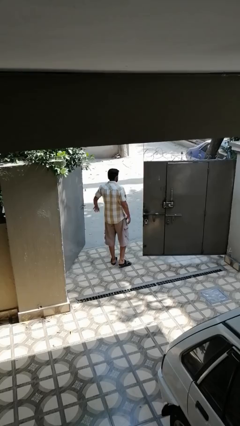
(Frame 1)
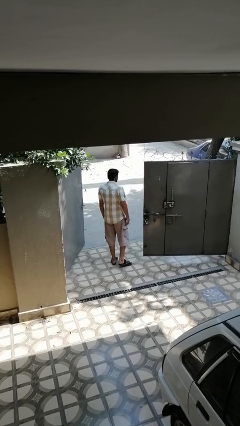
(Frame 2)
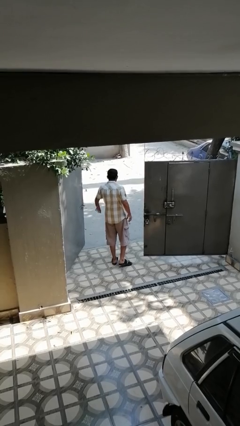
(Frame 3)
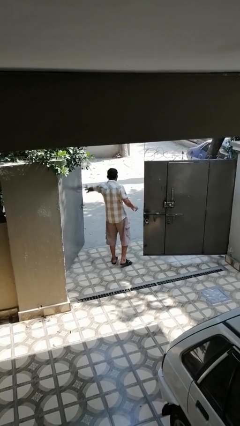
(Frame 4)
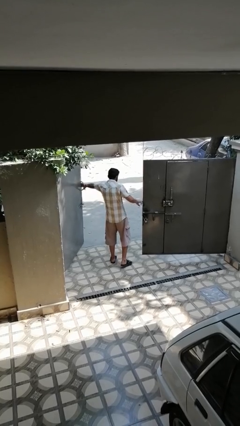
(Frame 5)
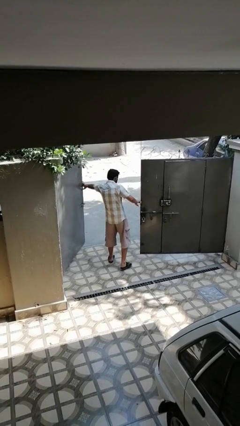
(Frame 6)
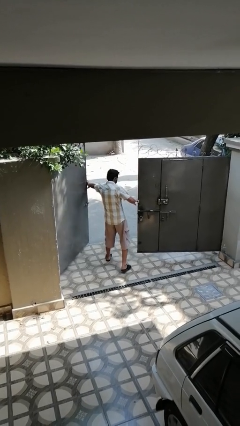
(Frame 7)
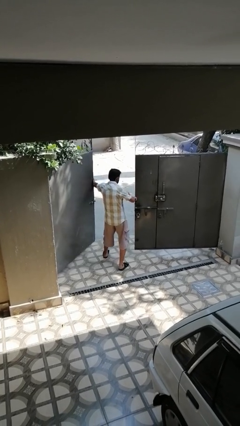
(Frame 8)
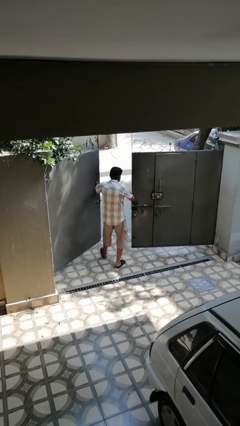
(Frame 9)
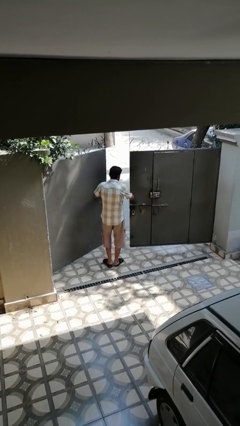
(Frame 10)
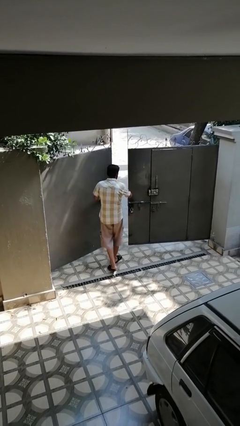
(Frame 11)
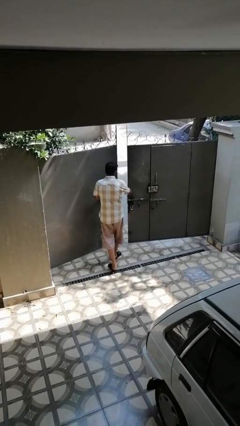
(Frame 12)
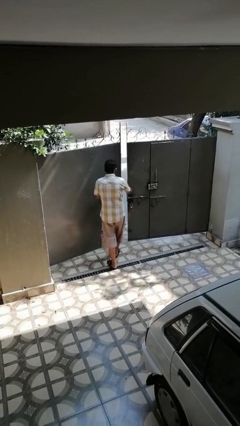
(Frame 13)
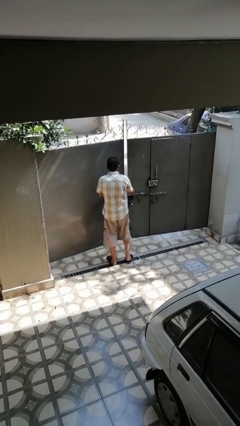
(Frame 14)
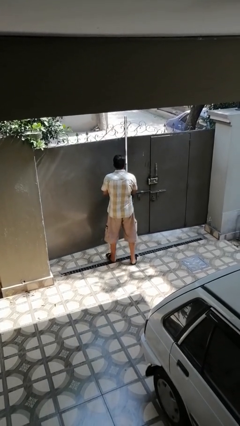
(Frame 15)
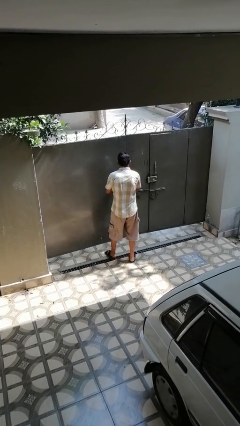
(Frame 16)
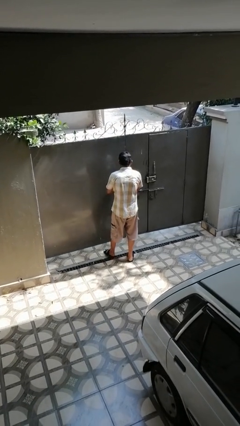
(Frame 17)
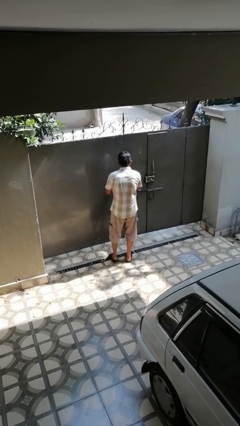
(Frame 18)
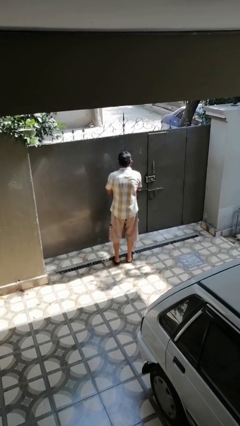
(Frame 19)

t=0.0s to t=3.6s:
person closes gate

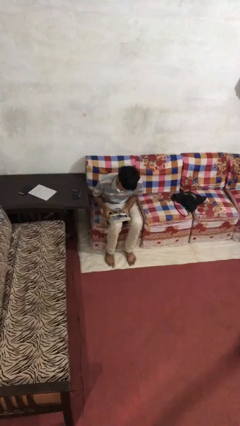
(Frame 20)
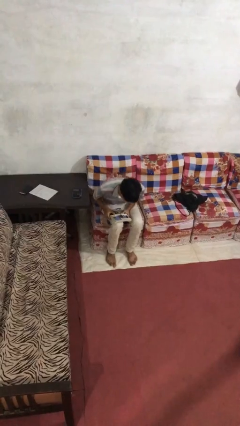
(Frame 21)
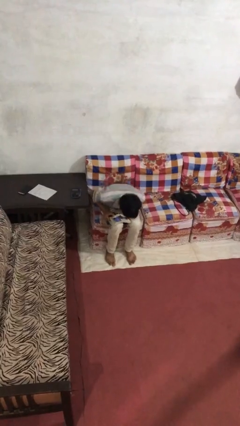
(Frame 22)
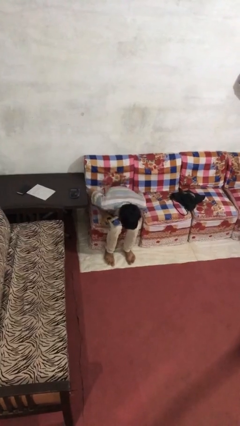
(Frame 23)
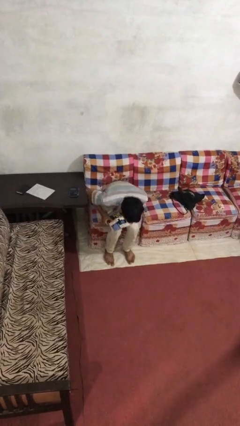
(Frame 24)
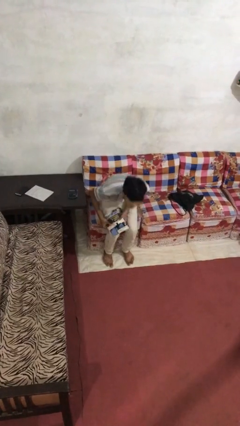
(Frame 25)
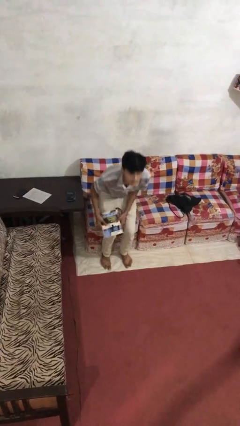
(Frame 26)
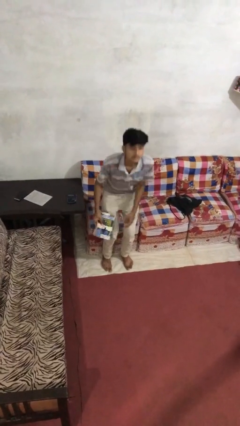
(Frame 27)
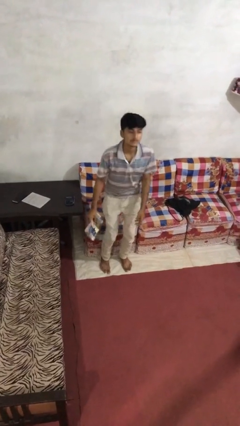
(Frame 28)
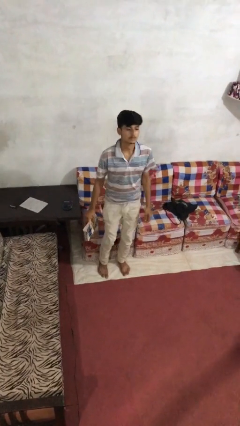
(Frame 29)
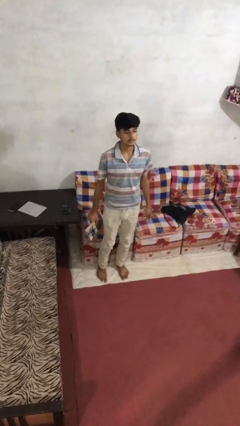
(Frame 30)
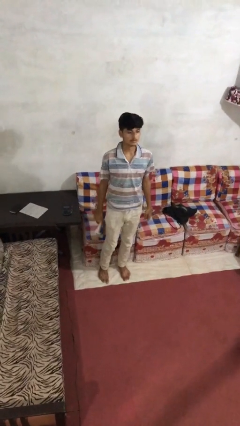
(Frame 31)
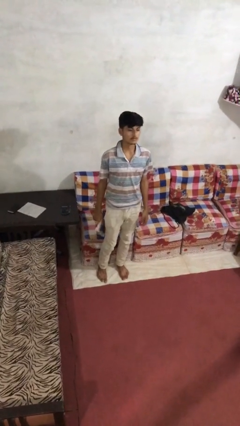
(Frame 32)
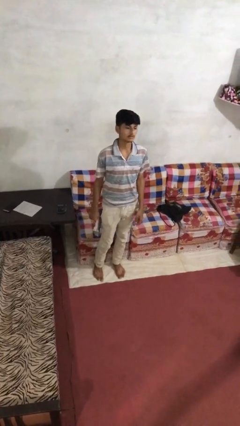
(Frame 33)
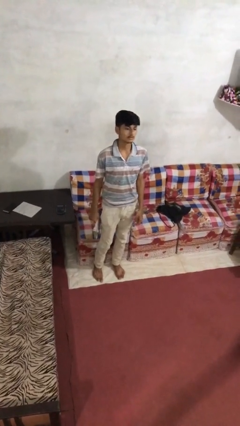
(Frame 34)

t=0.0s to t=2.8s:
person stands up

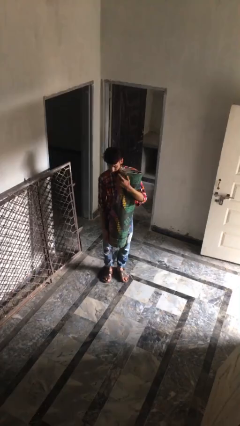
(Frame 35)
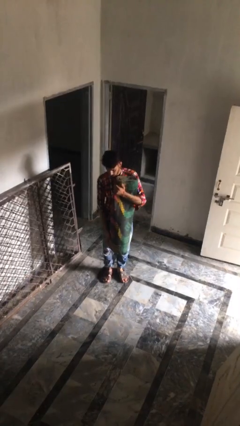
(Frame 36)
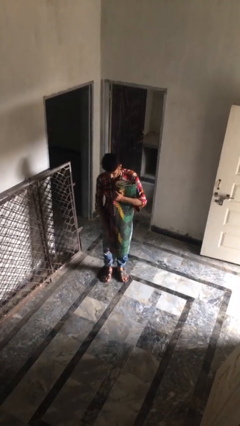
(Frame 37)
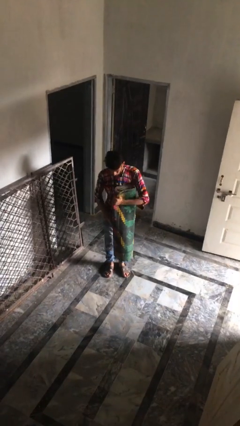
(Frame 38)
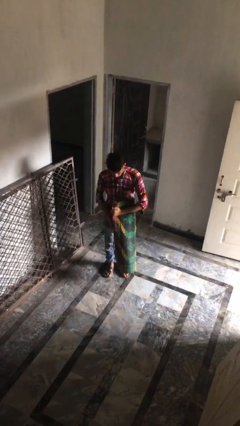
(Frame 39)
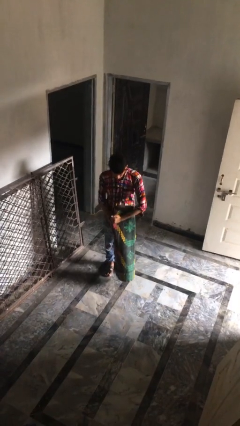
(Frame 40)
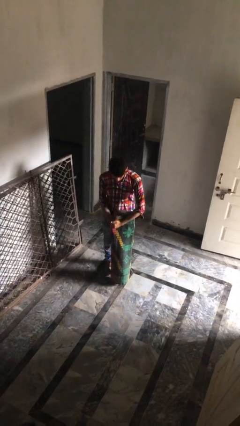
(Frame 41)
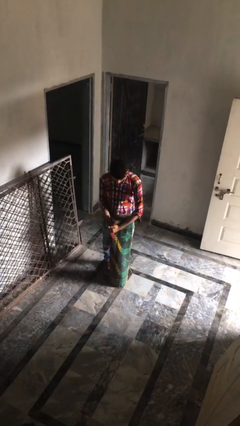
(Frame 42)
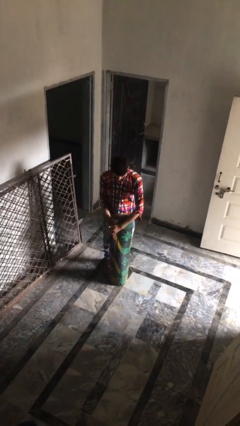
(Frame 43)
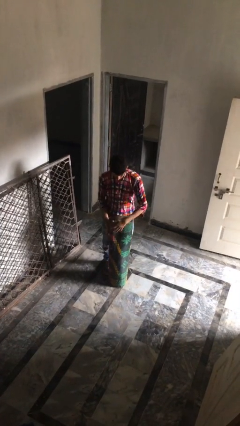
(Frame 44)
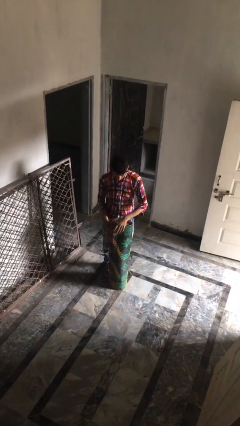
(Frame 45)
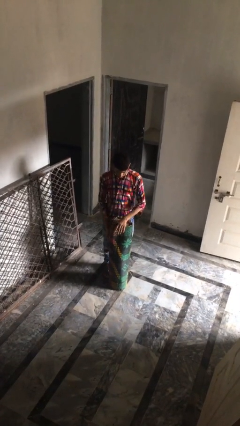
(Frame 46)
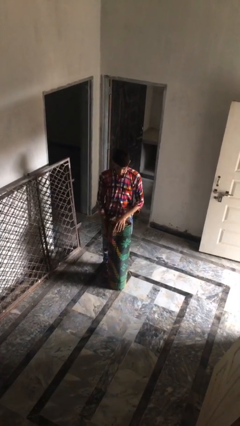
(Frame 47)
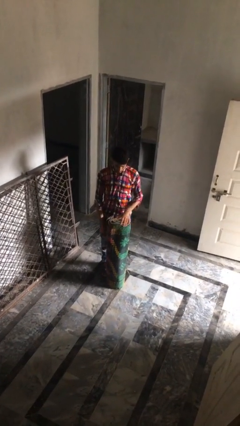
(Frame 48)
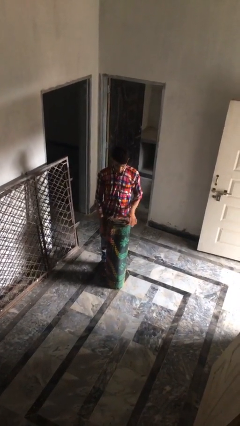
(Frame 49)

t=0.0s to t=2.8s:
person puts down object on floor

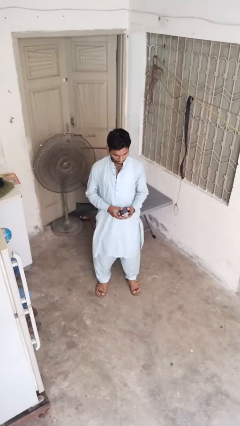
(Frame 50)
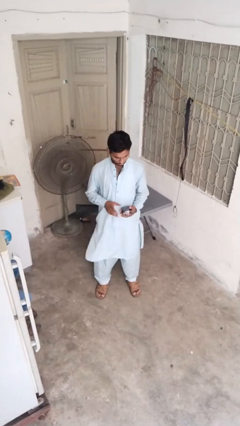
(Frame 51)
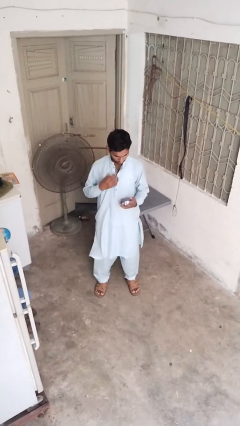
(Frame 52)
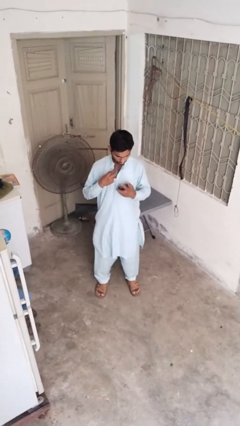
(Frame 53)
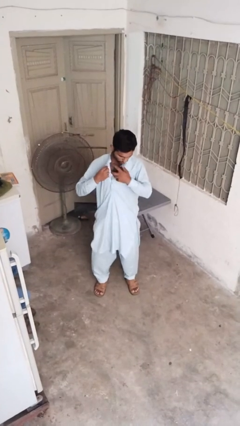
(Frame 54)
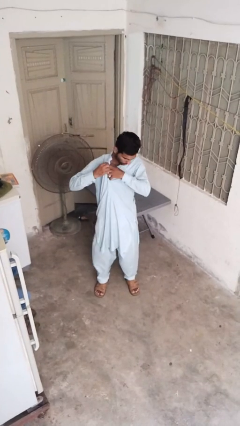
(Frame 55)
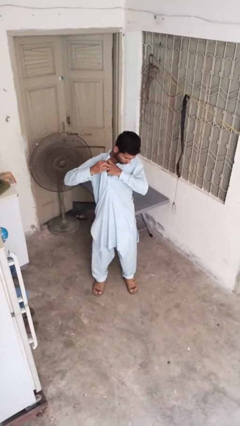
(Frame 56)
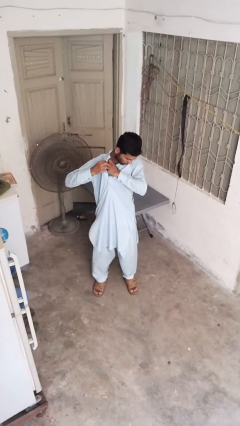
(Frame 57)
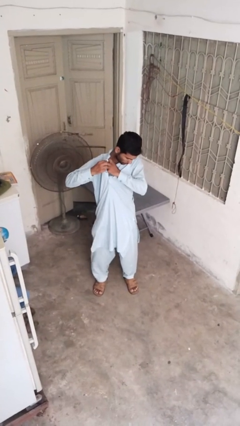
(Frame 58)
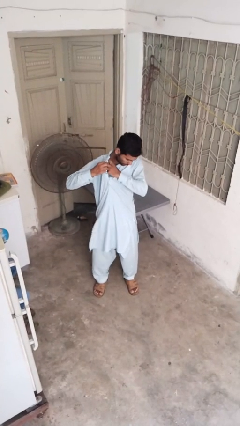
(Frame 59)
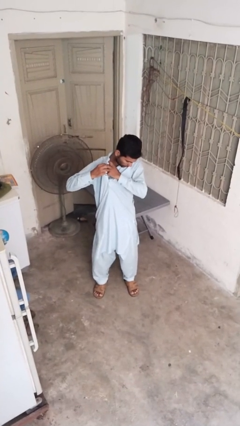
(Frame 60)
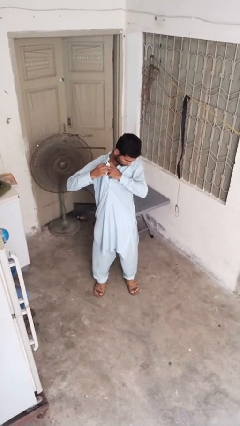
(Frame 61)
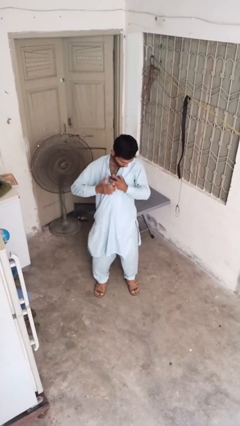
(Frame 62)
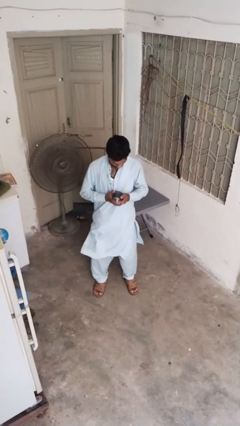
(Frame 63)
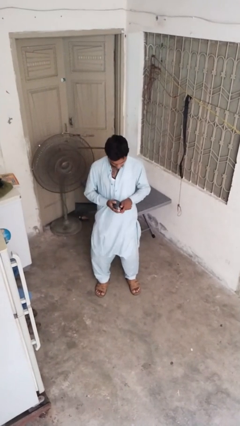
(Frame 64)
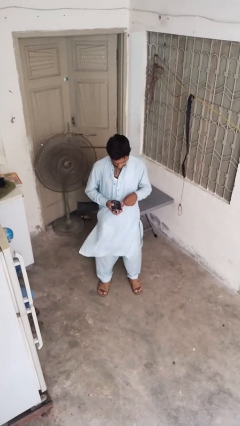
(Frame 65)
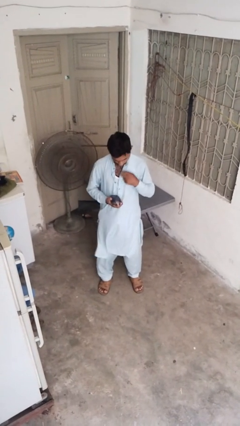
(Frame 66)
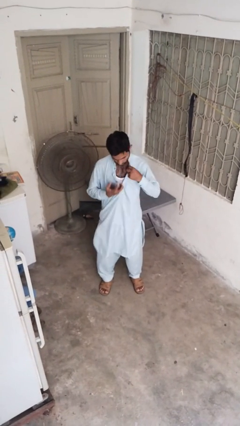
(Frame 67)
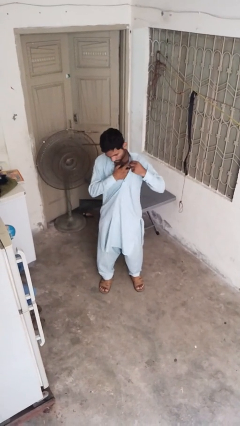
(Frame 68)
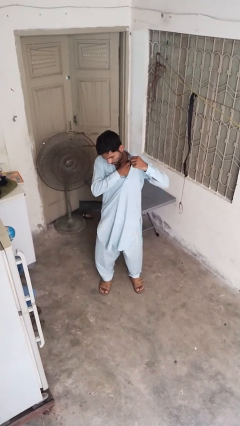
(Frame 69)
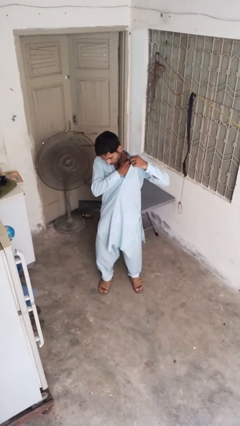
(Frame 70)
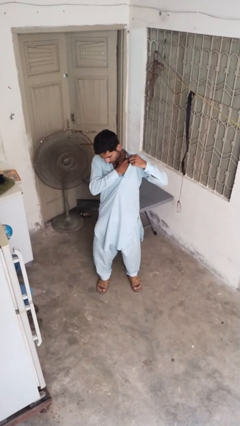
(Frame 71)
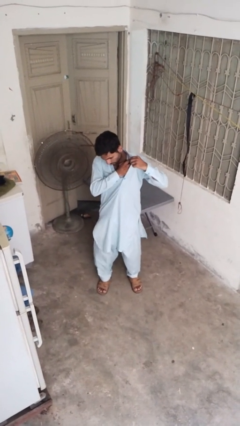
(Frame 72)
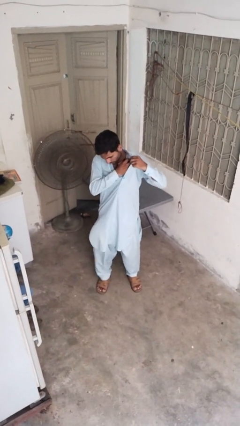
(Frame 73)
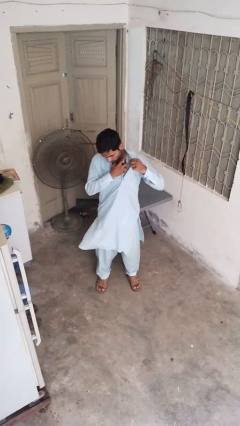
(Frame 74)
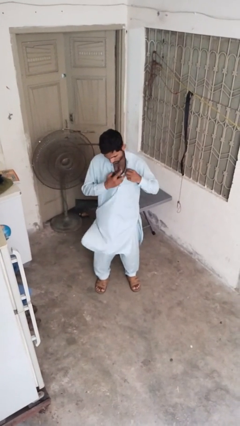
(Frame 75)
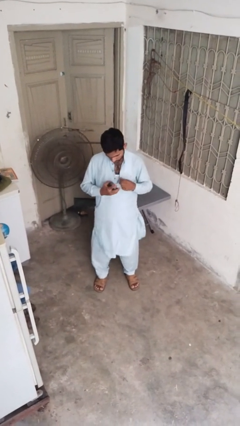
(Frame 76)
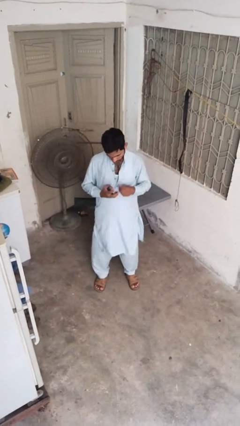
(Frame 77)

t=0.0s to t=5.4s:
person applies deodorant

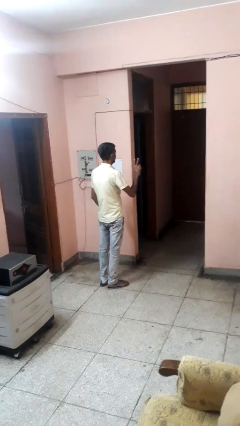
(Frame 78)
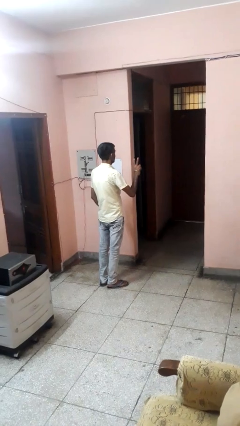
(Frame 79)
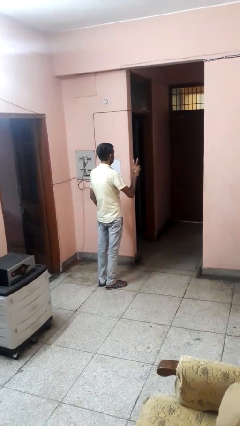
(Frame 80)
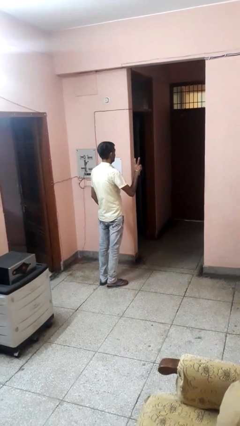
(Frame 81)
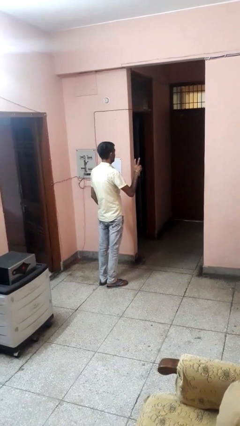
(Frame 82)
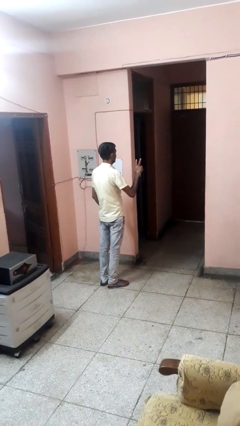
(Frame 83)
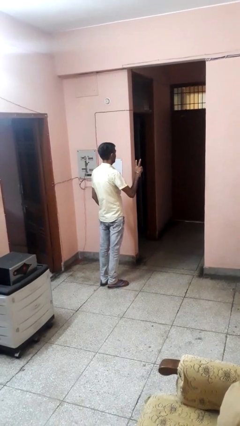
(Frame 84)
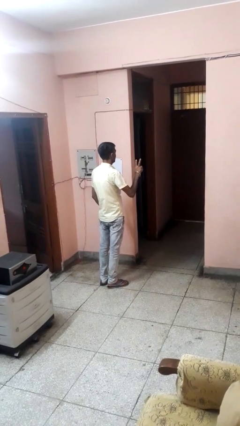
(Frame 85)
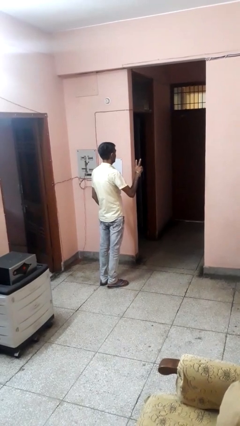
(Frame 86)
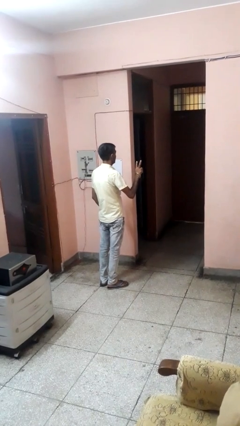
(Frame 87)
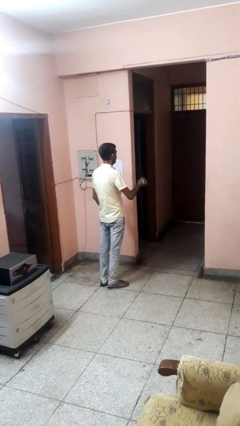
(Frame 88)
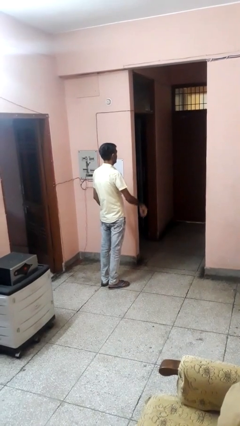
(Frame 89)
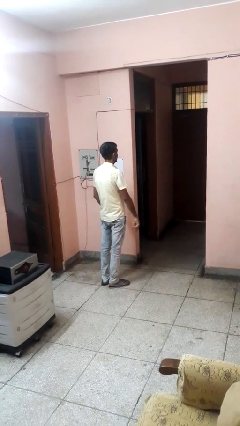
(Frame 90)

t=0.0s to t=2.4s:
person gestures peace

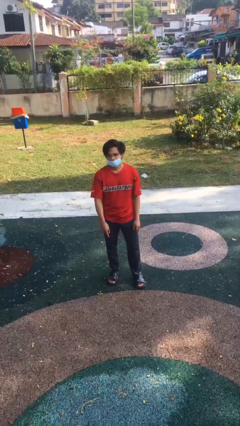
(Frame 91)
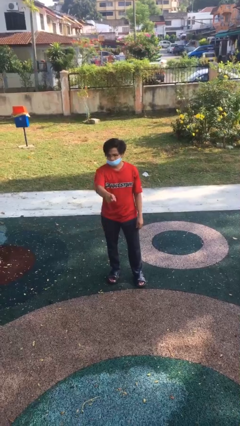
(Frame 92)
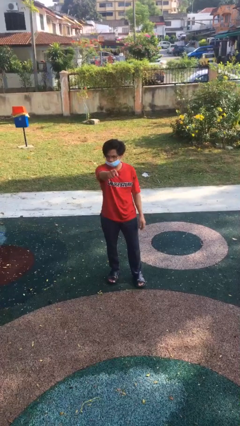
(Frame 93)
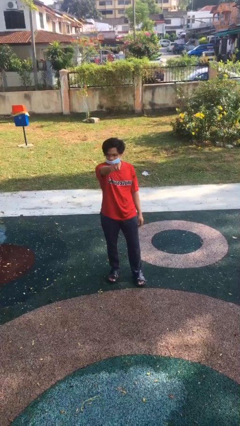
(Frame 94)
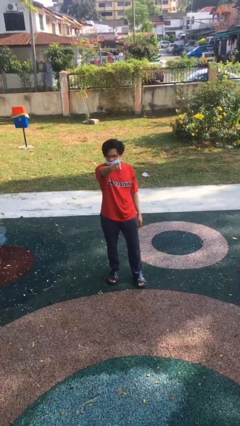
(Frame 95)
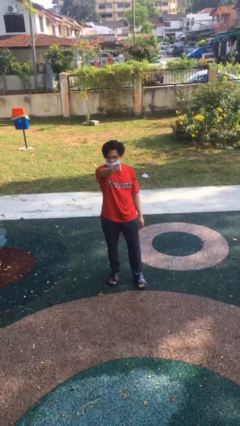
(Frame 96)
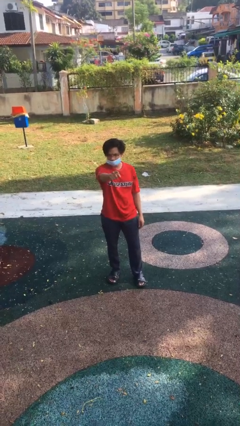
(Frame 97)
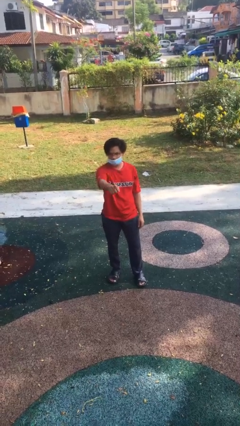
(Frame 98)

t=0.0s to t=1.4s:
person points at person
